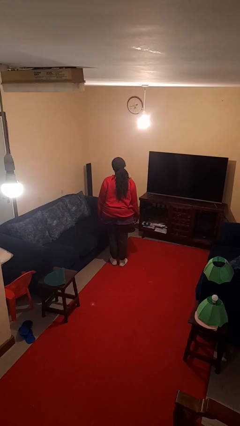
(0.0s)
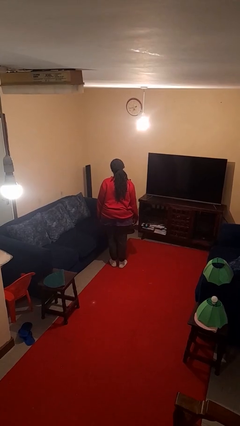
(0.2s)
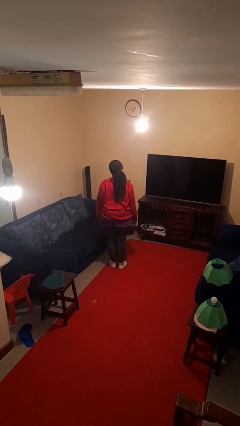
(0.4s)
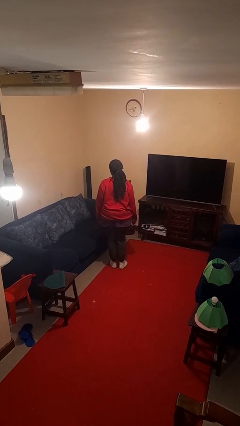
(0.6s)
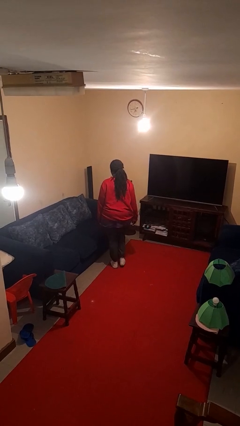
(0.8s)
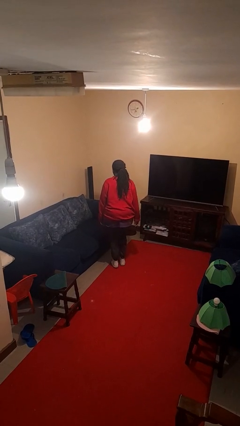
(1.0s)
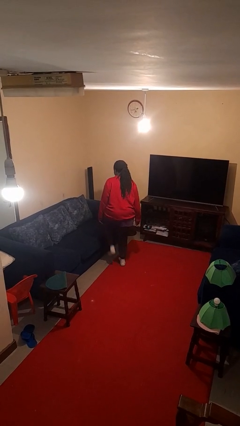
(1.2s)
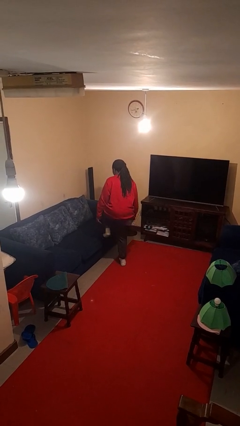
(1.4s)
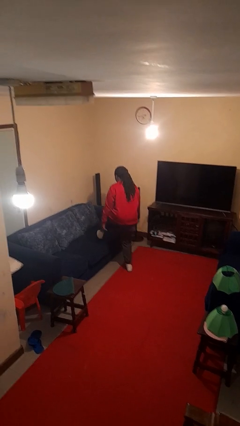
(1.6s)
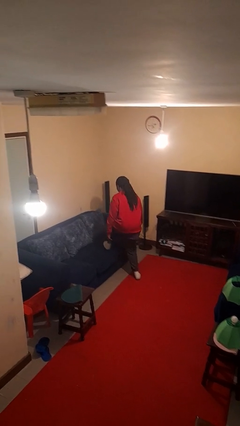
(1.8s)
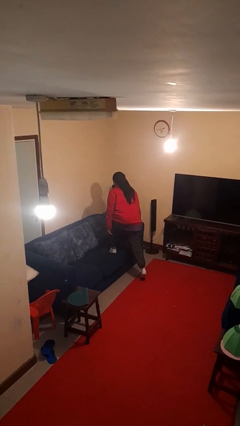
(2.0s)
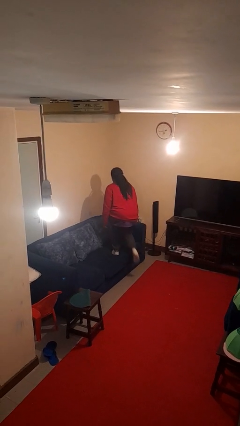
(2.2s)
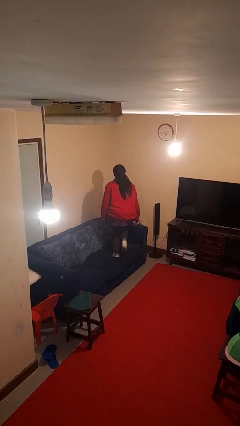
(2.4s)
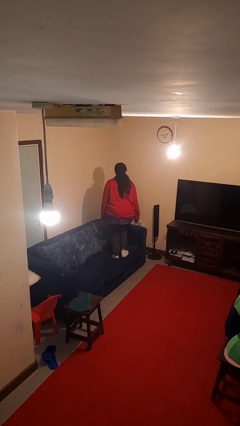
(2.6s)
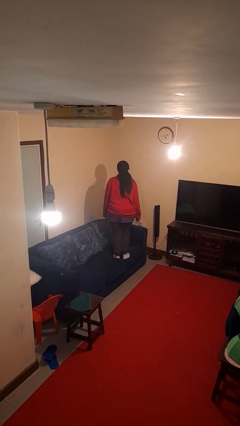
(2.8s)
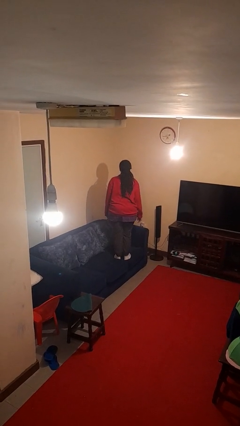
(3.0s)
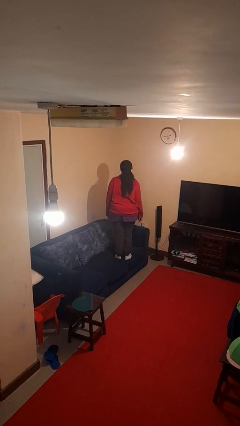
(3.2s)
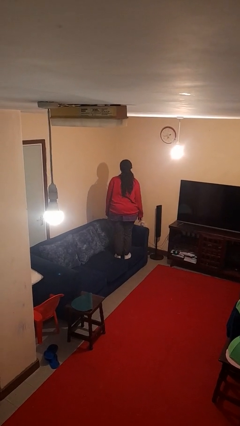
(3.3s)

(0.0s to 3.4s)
person climbs on couch

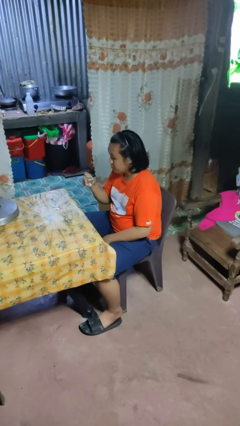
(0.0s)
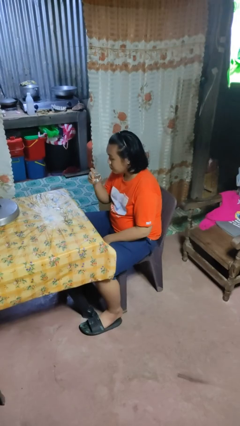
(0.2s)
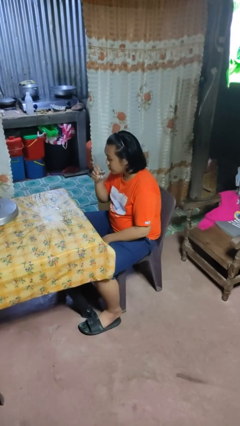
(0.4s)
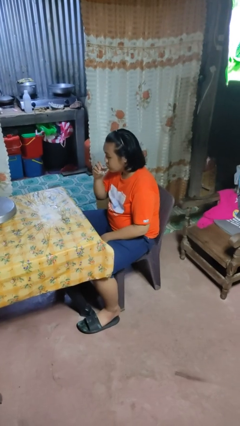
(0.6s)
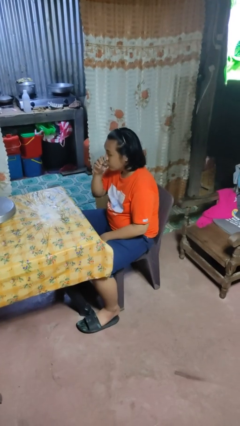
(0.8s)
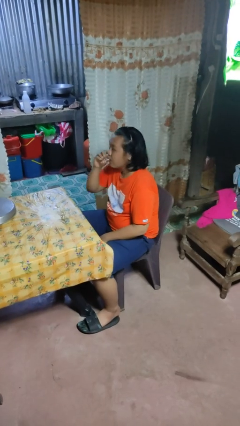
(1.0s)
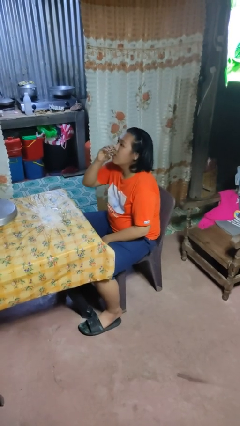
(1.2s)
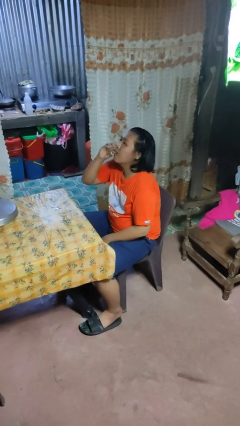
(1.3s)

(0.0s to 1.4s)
person drinks from shotglass

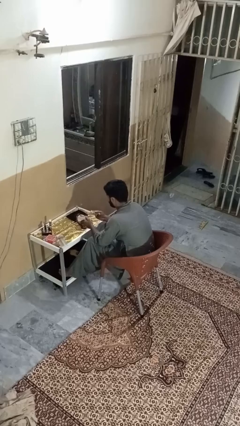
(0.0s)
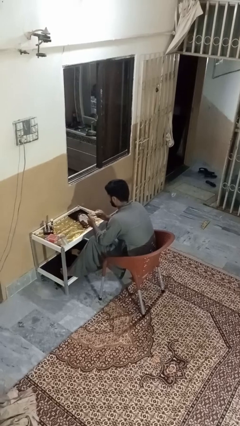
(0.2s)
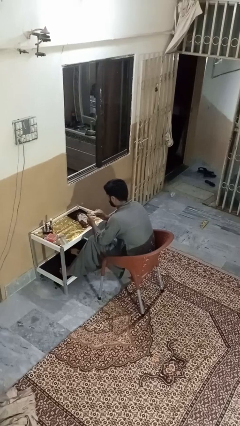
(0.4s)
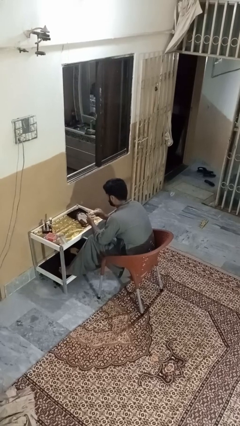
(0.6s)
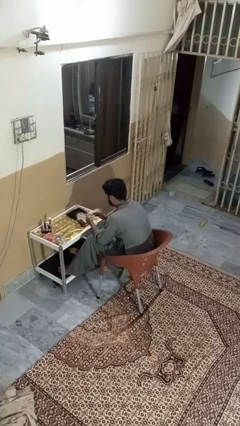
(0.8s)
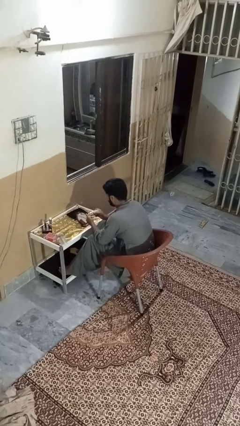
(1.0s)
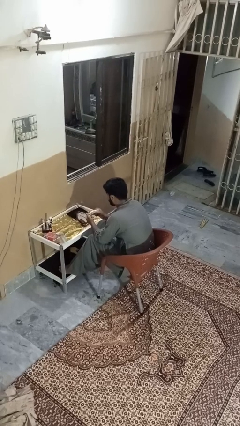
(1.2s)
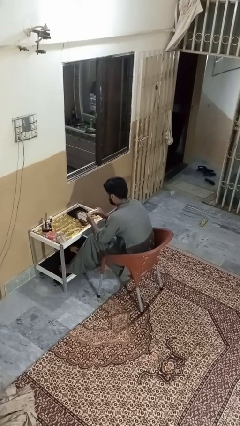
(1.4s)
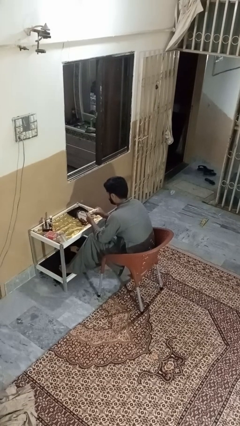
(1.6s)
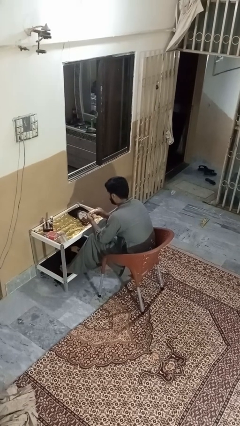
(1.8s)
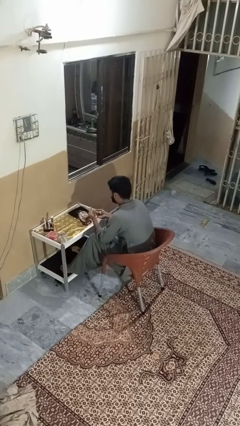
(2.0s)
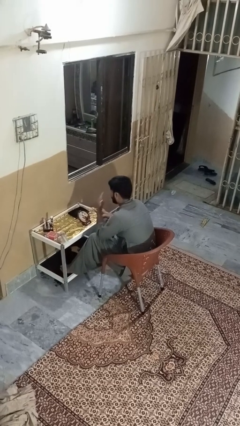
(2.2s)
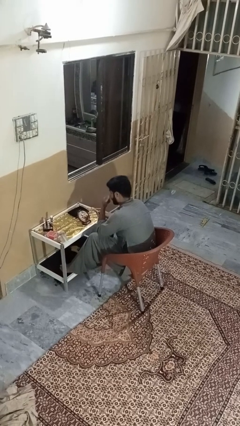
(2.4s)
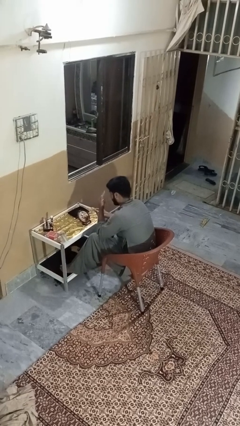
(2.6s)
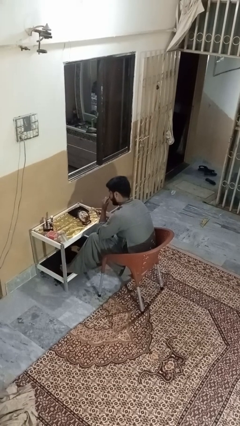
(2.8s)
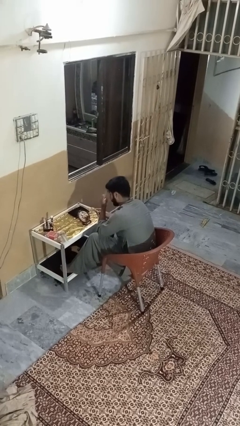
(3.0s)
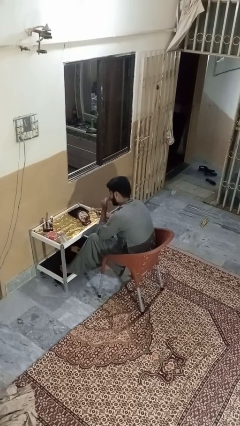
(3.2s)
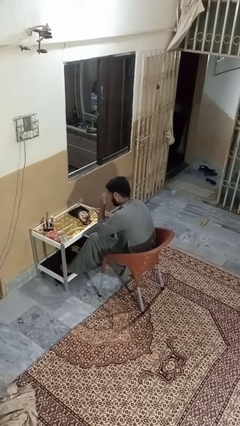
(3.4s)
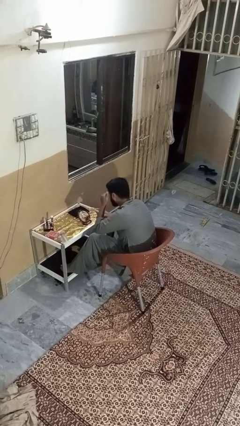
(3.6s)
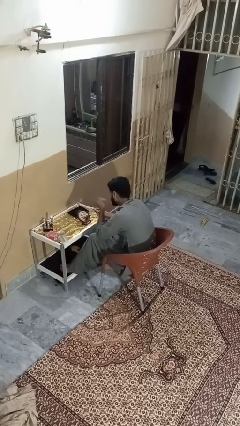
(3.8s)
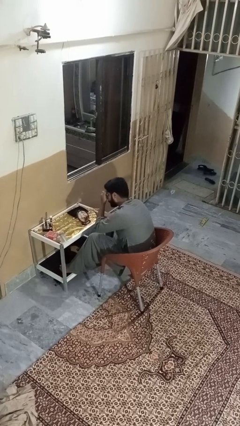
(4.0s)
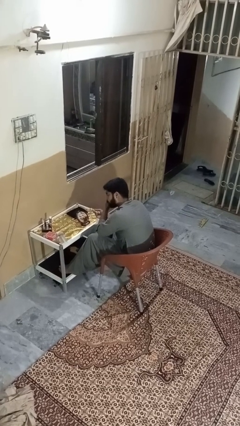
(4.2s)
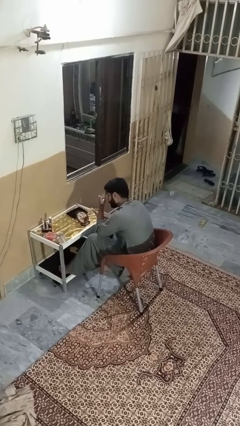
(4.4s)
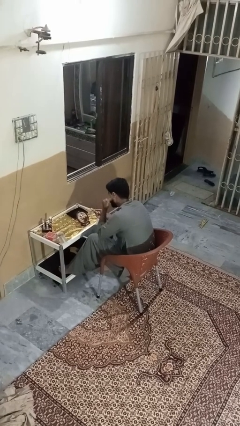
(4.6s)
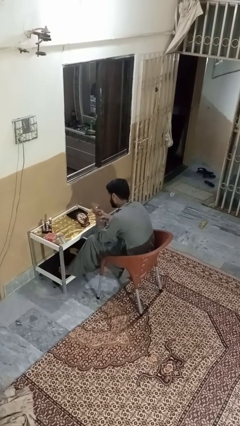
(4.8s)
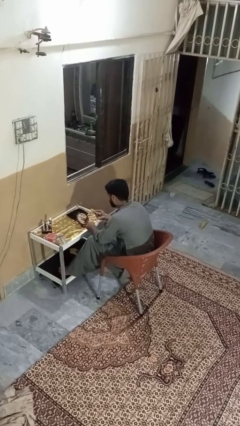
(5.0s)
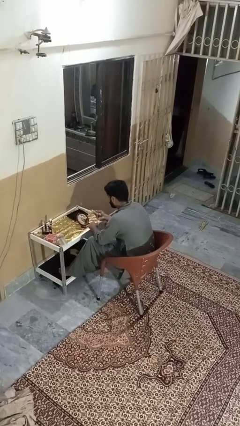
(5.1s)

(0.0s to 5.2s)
person applies foundation makeup

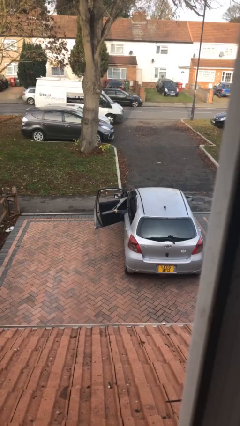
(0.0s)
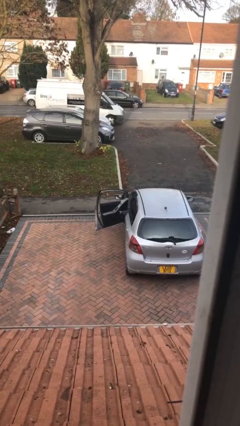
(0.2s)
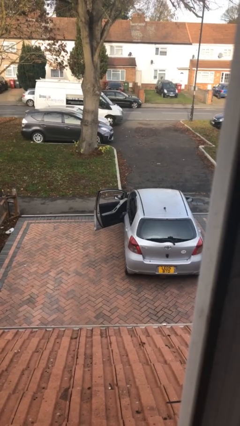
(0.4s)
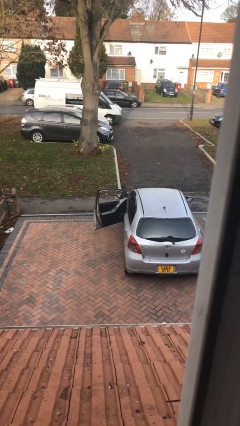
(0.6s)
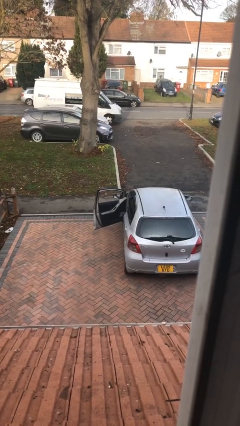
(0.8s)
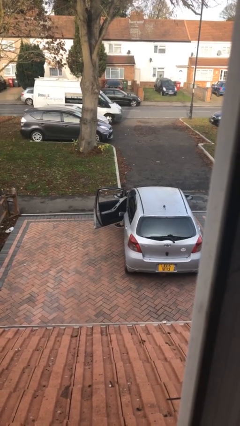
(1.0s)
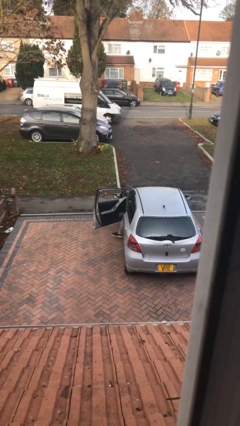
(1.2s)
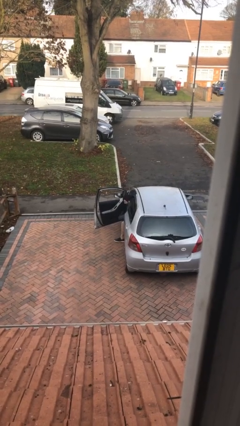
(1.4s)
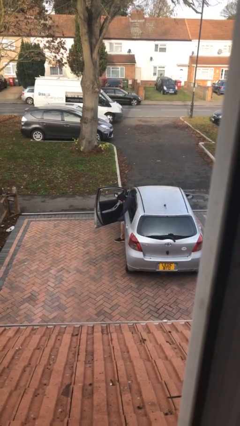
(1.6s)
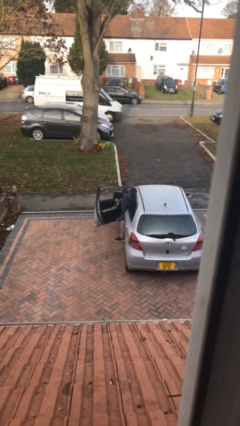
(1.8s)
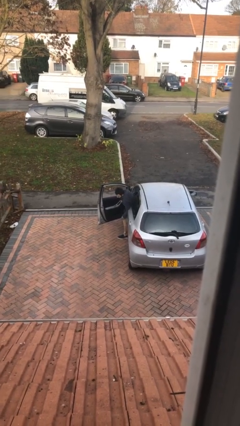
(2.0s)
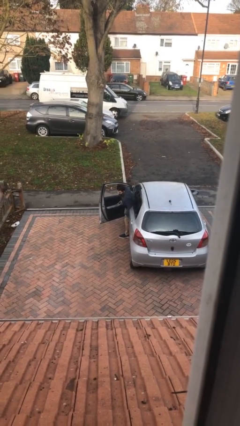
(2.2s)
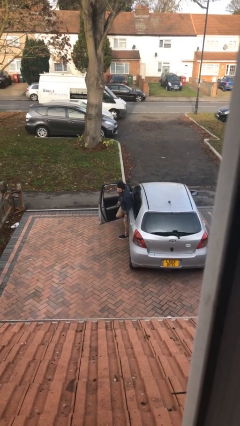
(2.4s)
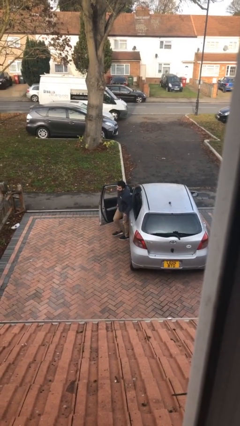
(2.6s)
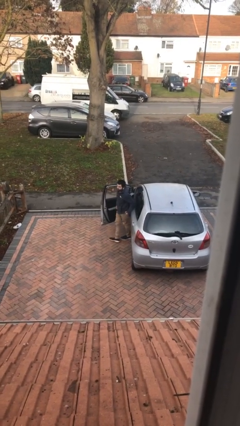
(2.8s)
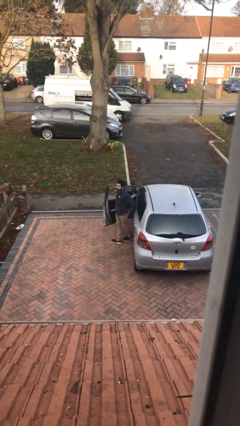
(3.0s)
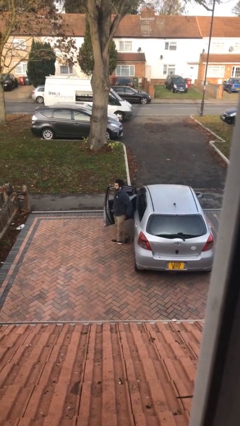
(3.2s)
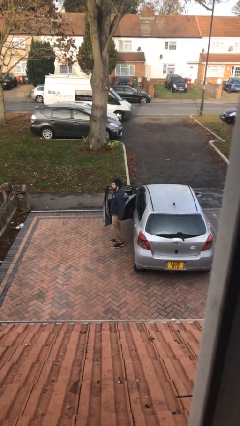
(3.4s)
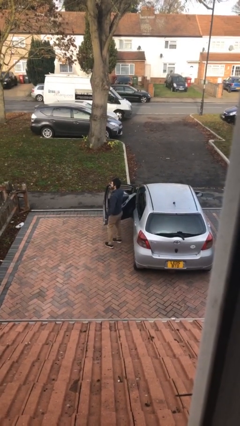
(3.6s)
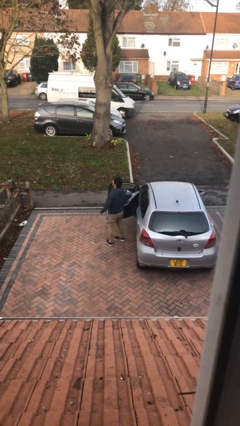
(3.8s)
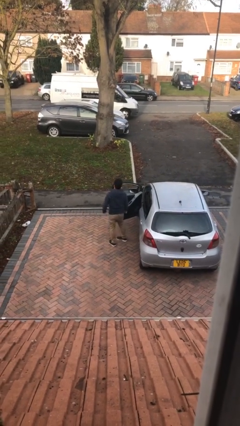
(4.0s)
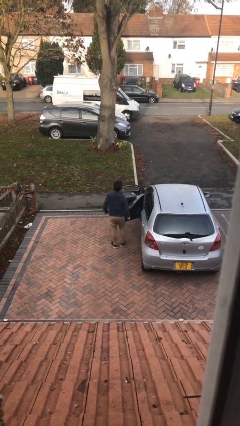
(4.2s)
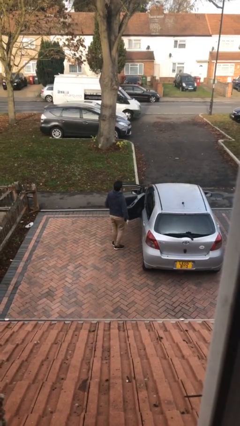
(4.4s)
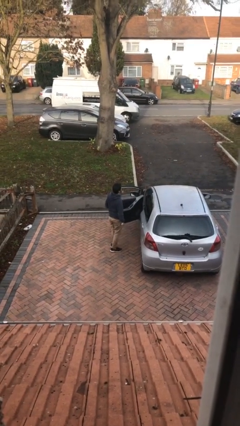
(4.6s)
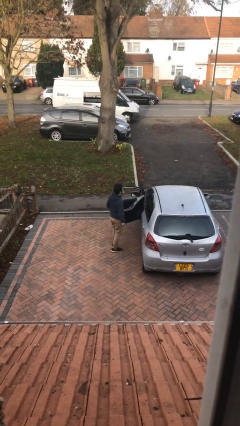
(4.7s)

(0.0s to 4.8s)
person exits car

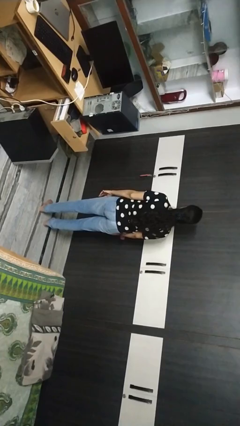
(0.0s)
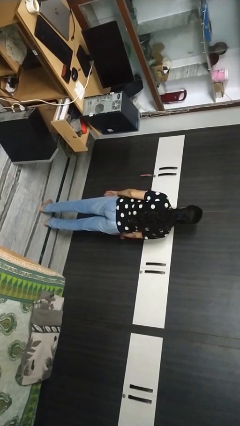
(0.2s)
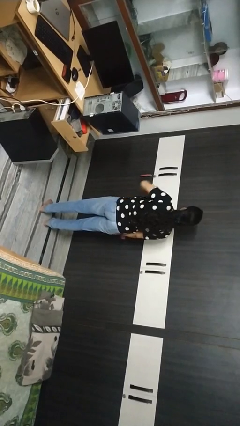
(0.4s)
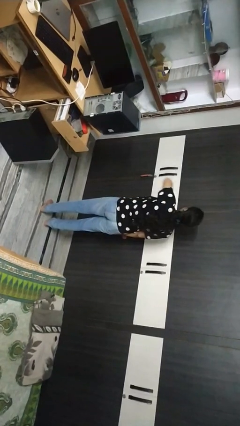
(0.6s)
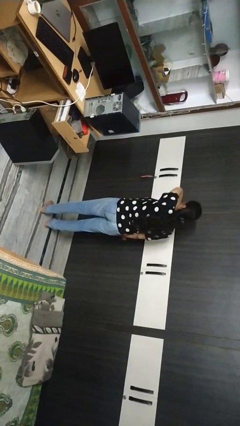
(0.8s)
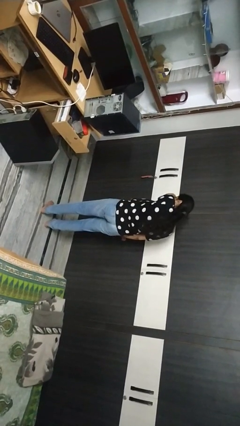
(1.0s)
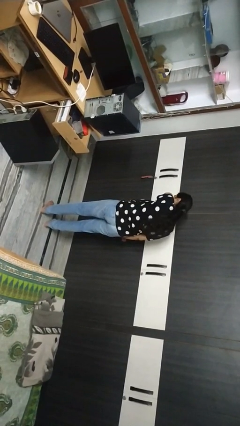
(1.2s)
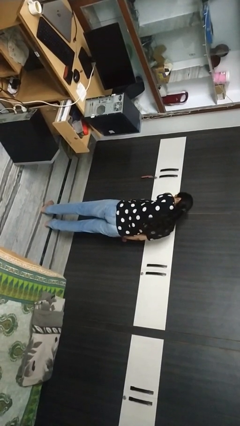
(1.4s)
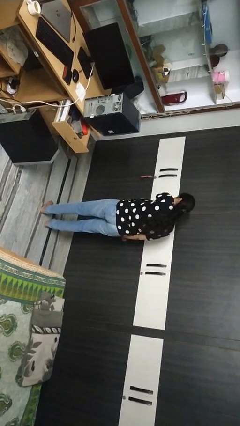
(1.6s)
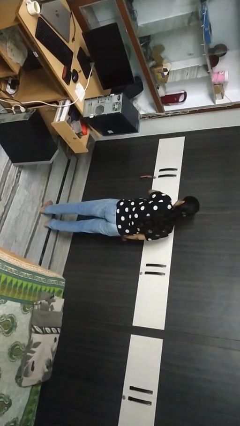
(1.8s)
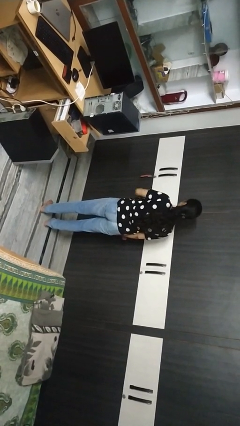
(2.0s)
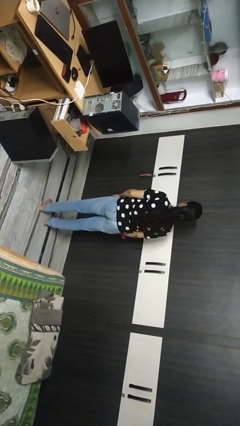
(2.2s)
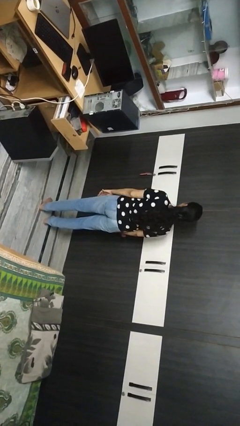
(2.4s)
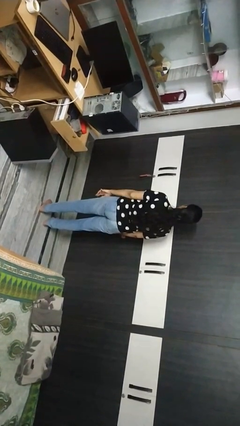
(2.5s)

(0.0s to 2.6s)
person sneezes into arm

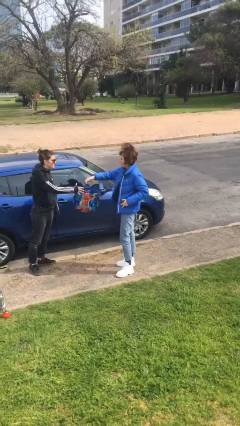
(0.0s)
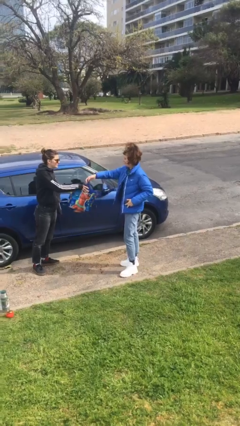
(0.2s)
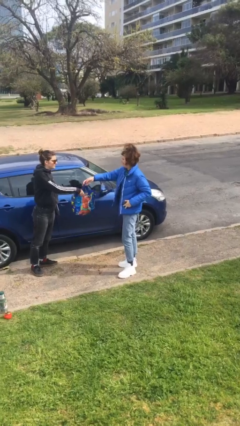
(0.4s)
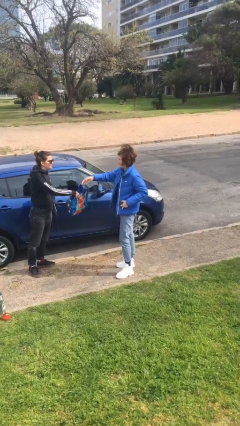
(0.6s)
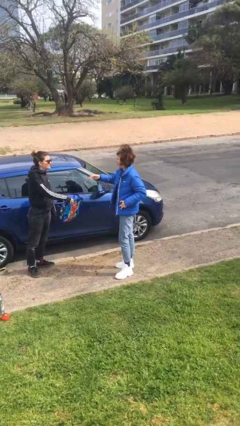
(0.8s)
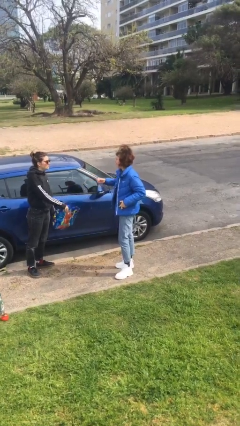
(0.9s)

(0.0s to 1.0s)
person transfers object to person
